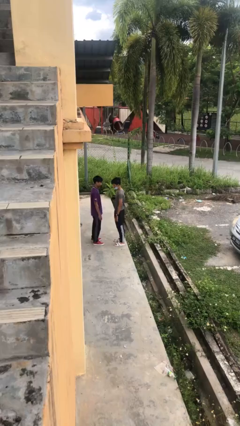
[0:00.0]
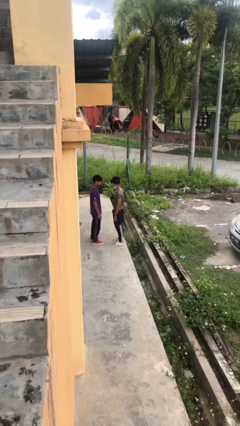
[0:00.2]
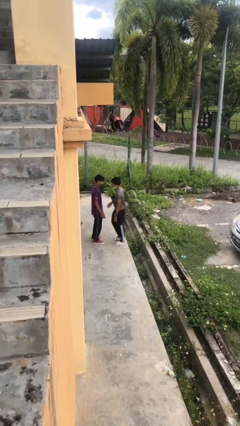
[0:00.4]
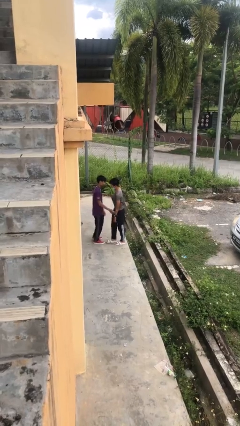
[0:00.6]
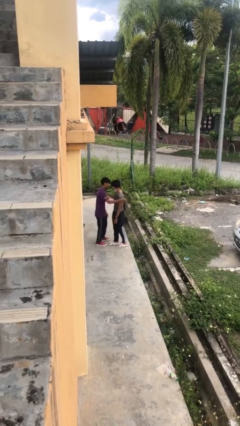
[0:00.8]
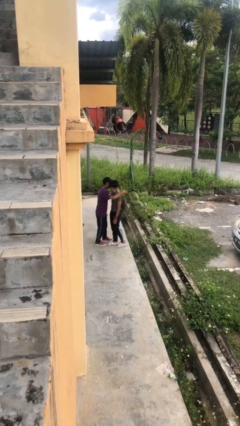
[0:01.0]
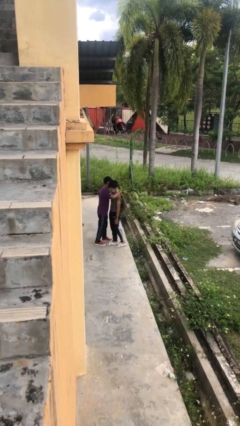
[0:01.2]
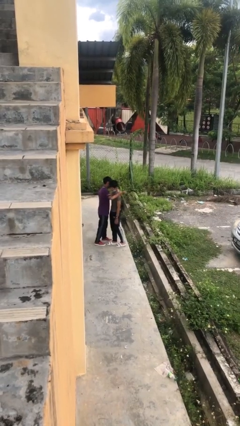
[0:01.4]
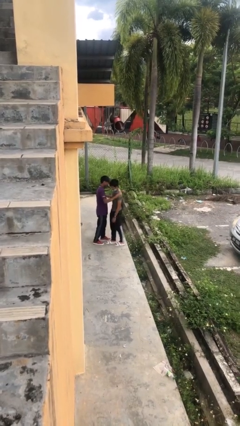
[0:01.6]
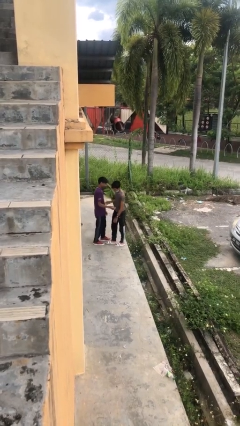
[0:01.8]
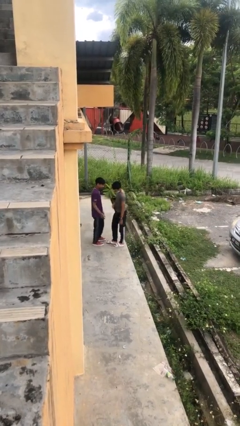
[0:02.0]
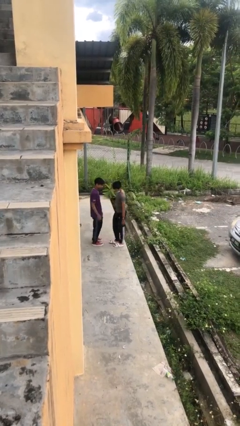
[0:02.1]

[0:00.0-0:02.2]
person embraces person

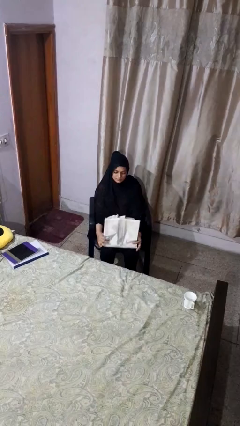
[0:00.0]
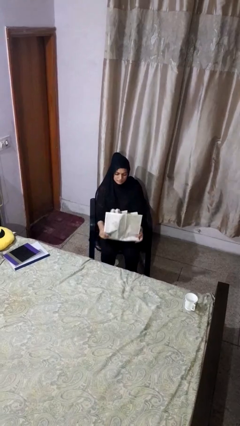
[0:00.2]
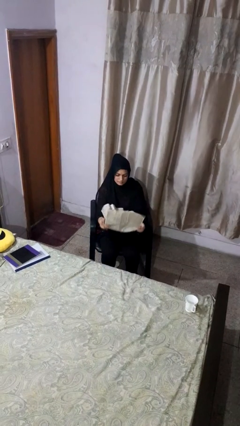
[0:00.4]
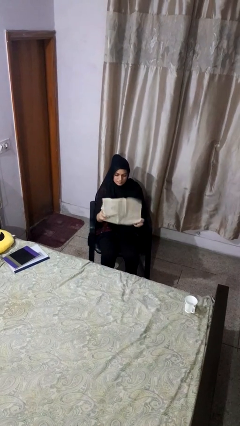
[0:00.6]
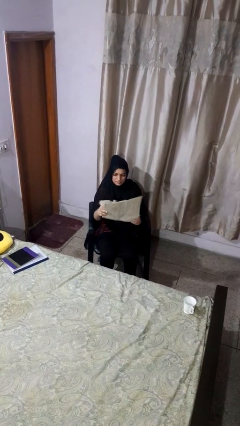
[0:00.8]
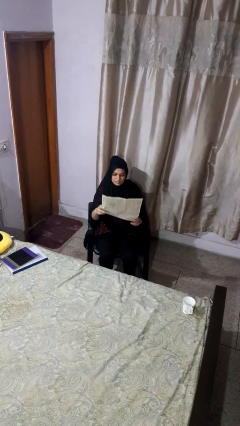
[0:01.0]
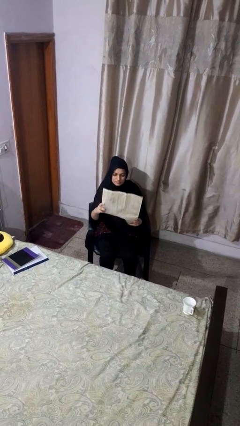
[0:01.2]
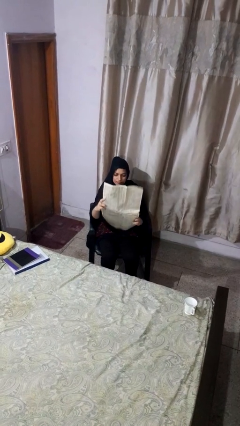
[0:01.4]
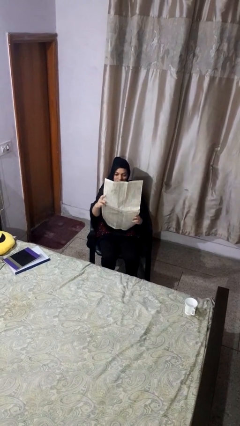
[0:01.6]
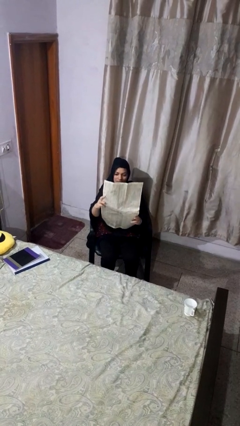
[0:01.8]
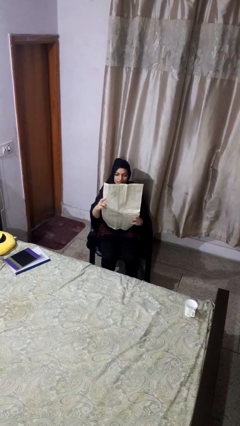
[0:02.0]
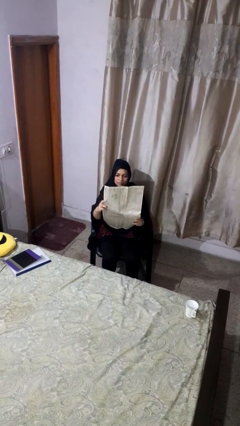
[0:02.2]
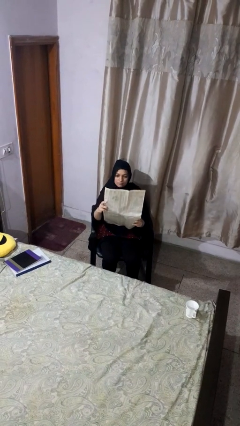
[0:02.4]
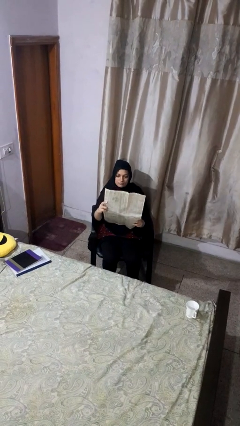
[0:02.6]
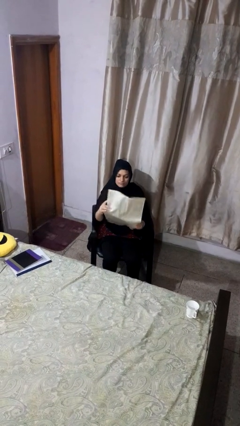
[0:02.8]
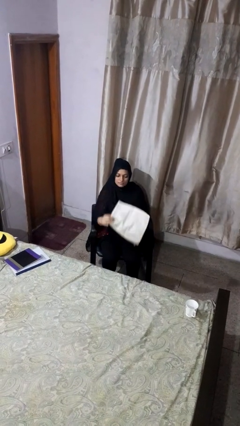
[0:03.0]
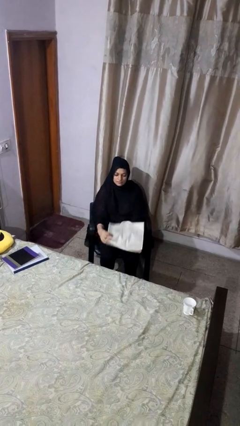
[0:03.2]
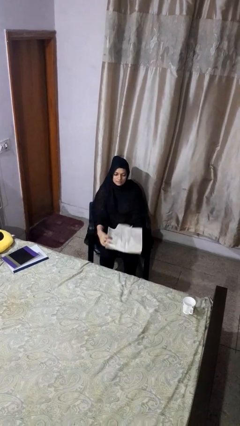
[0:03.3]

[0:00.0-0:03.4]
person reads newspaper

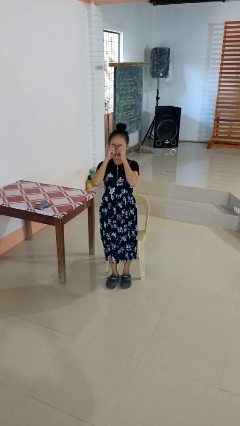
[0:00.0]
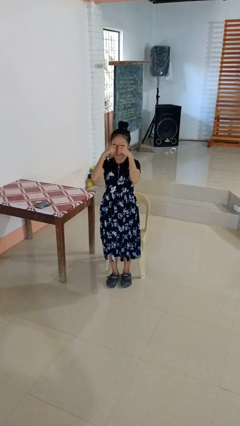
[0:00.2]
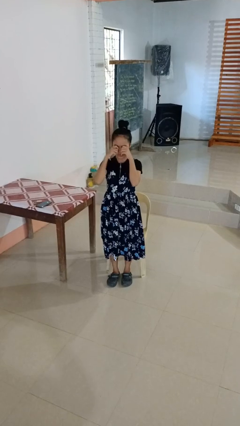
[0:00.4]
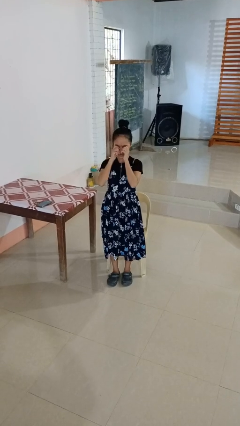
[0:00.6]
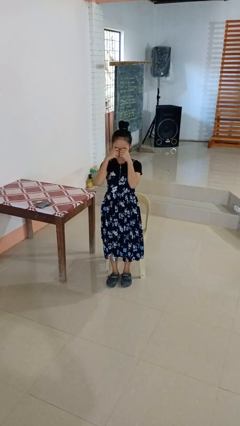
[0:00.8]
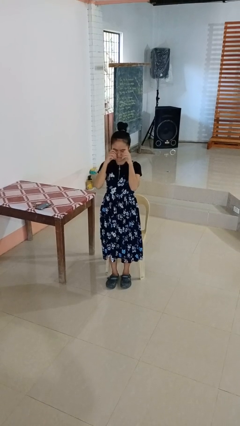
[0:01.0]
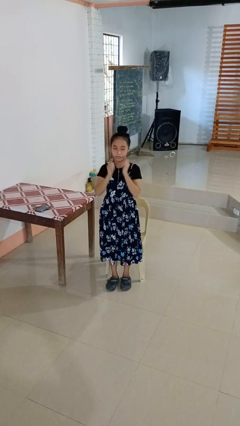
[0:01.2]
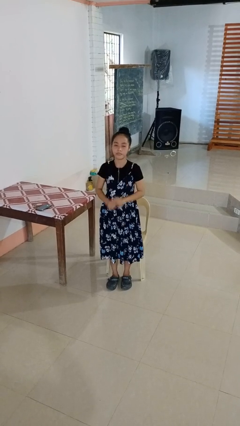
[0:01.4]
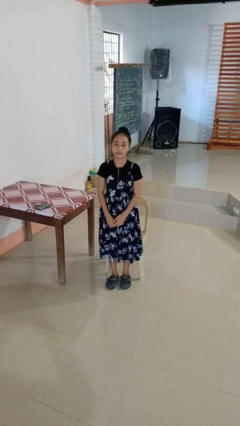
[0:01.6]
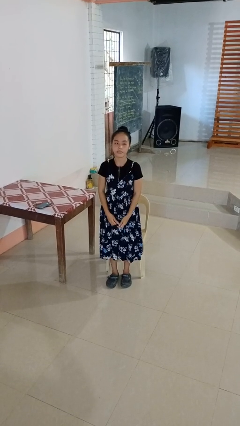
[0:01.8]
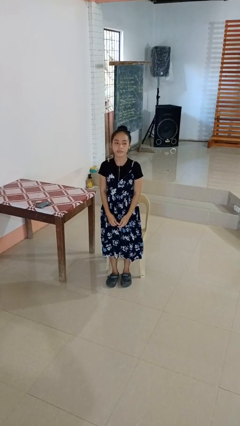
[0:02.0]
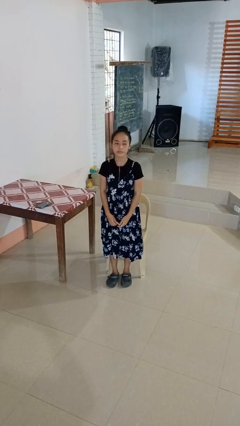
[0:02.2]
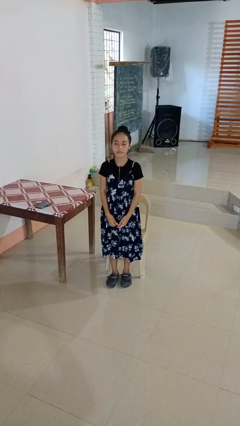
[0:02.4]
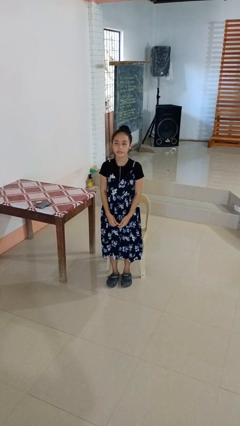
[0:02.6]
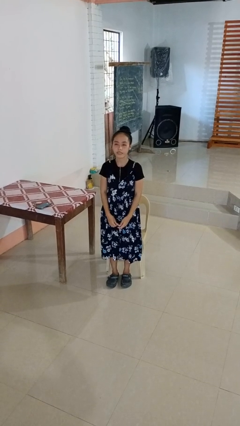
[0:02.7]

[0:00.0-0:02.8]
person rubs eyes

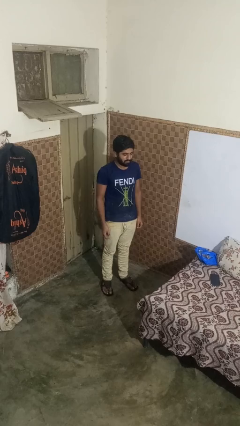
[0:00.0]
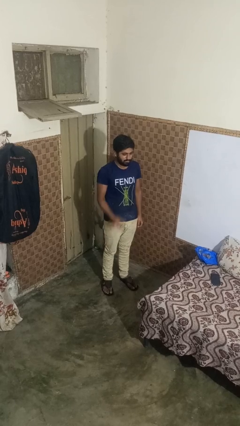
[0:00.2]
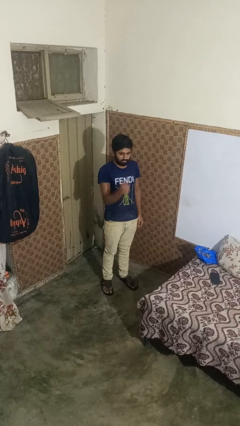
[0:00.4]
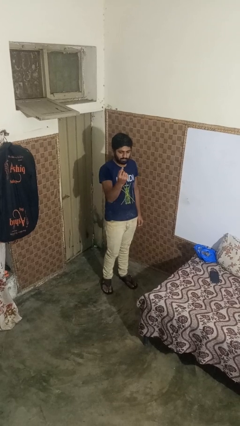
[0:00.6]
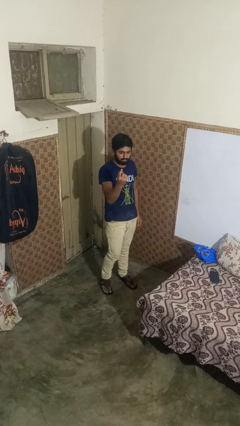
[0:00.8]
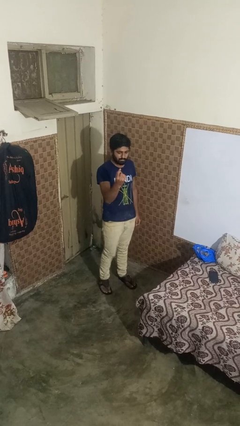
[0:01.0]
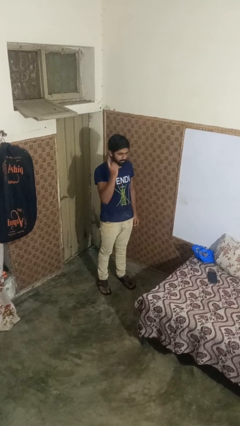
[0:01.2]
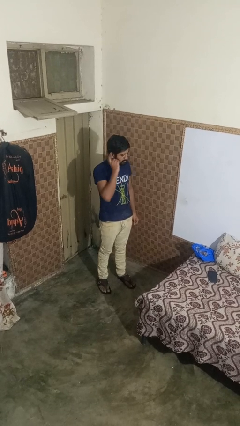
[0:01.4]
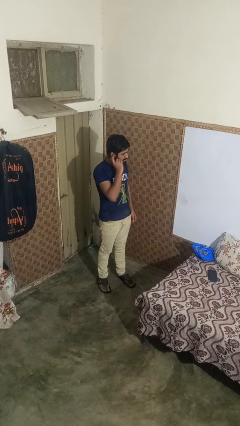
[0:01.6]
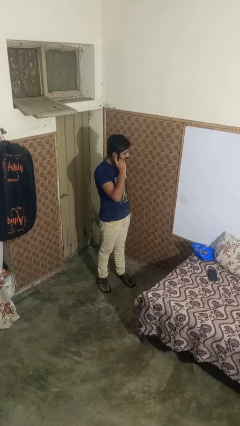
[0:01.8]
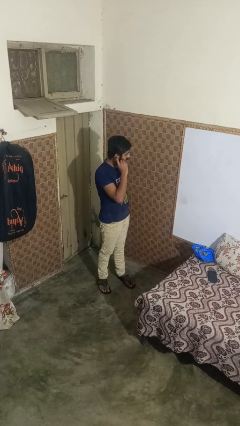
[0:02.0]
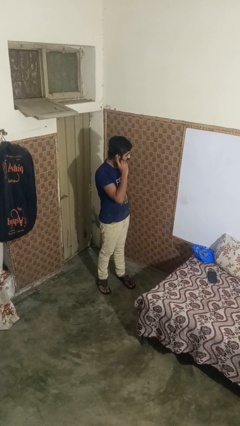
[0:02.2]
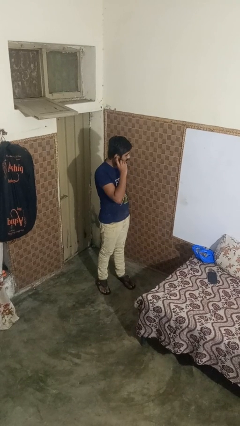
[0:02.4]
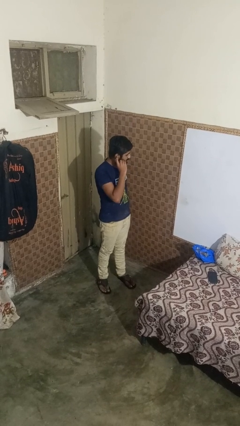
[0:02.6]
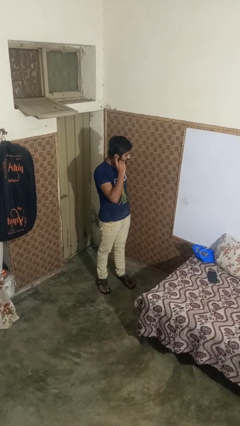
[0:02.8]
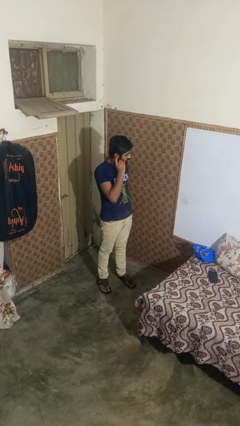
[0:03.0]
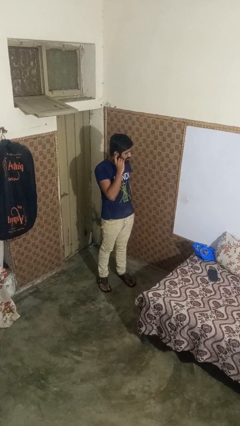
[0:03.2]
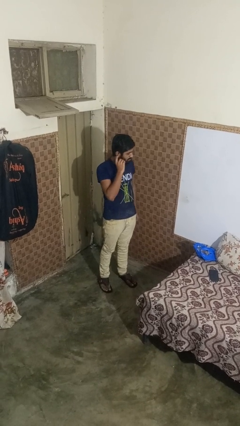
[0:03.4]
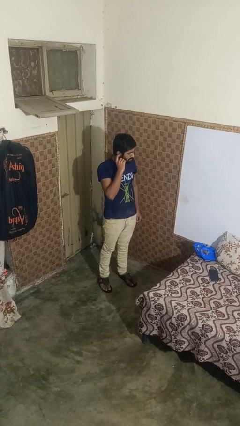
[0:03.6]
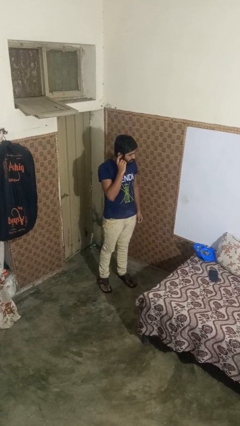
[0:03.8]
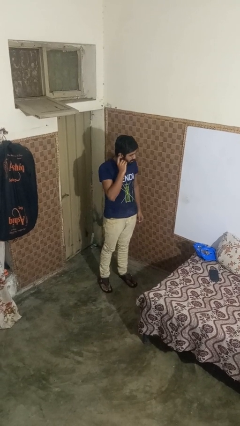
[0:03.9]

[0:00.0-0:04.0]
person gestures listen closely

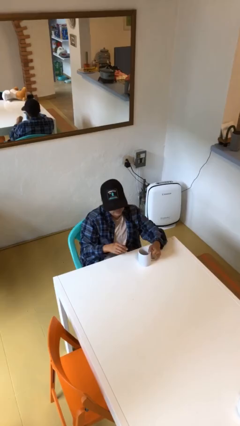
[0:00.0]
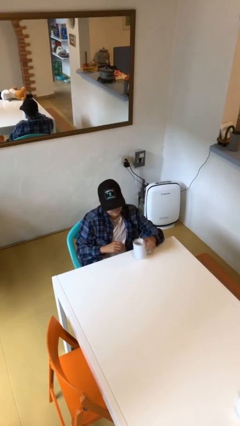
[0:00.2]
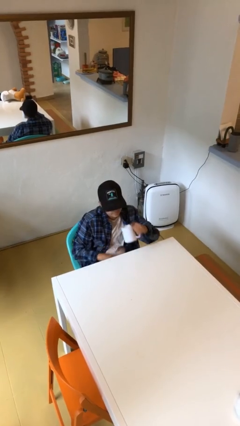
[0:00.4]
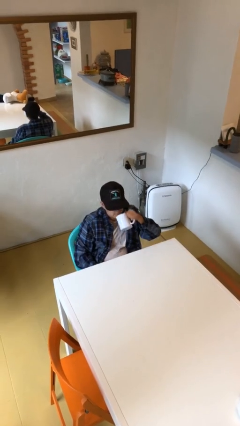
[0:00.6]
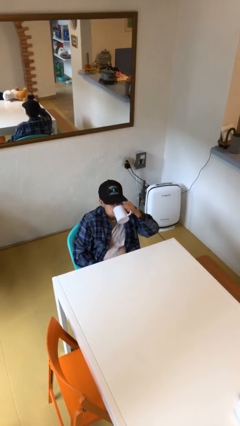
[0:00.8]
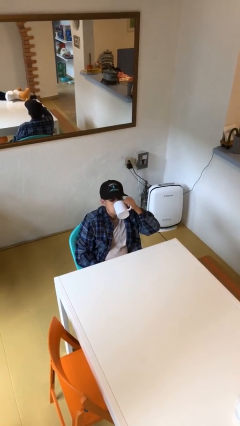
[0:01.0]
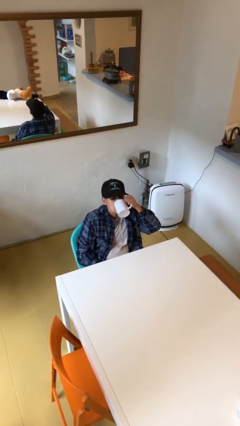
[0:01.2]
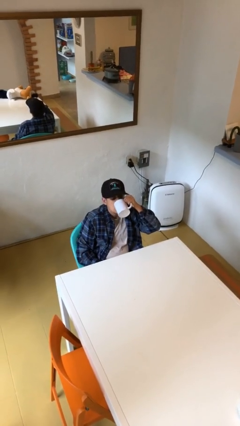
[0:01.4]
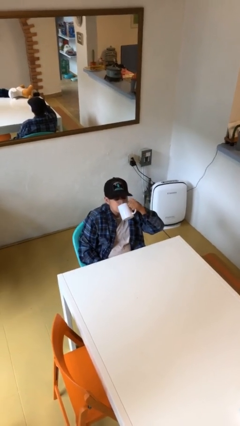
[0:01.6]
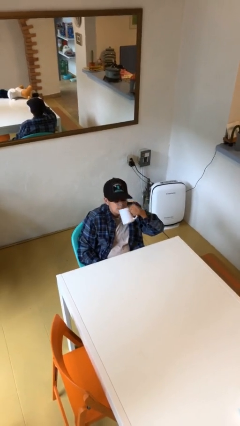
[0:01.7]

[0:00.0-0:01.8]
person drinks from mug

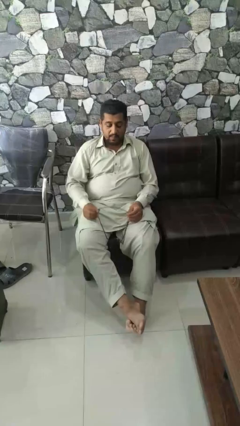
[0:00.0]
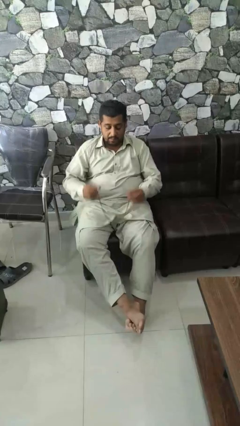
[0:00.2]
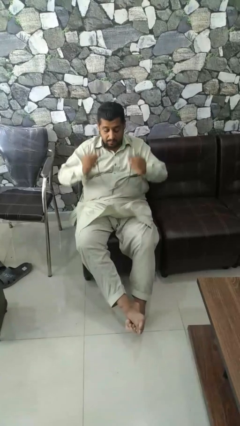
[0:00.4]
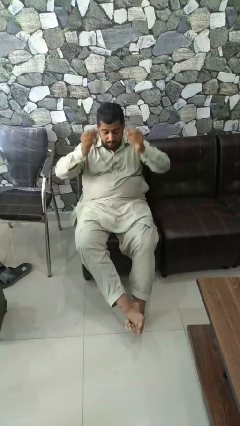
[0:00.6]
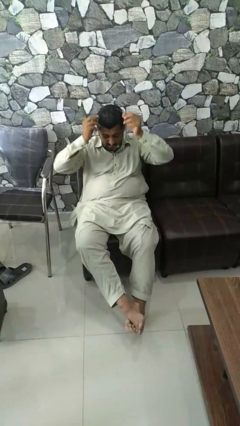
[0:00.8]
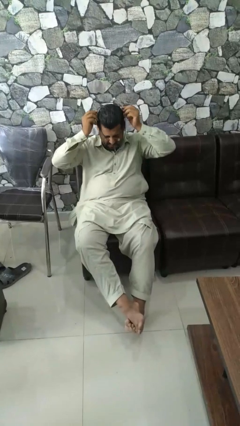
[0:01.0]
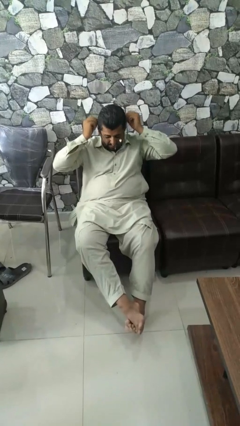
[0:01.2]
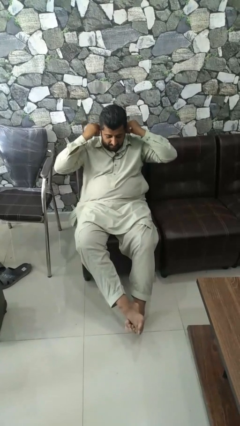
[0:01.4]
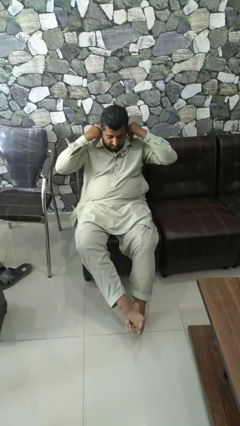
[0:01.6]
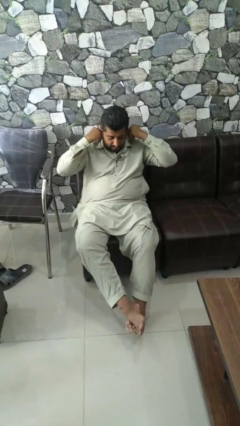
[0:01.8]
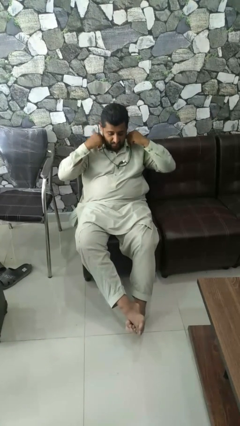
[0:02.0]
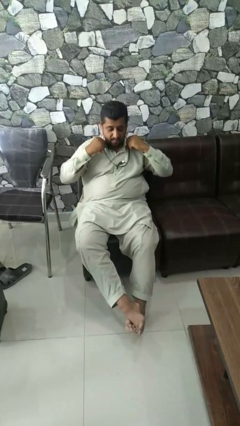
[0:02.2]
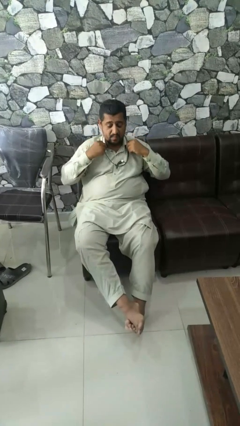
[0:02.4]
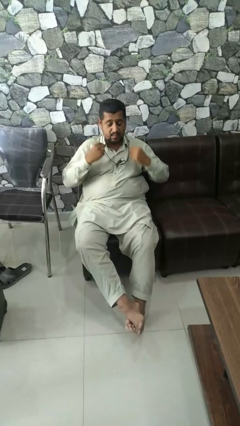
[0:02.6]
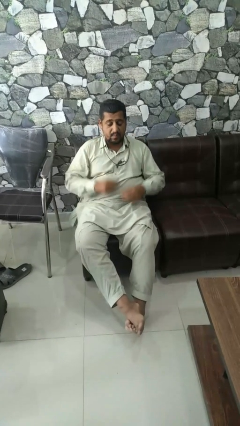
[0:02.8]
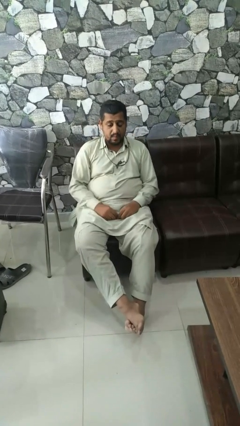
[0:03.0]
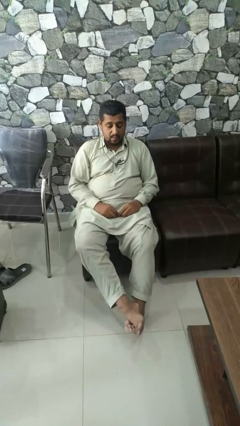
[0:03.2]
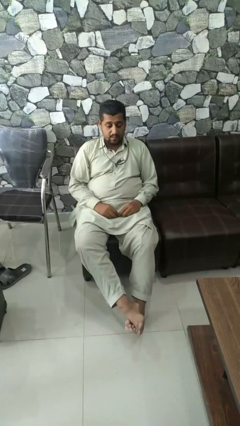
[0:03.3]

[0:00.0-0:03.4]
person puts on necklace
